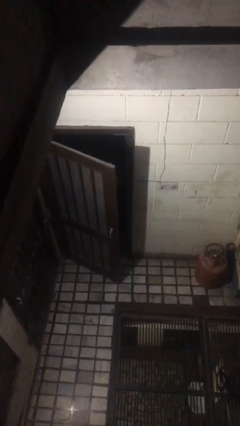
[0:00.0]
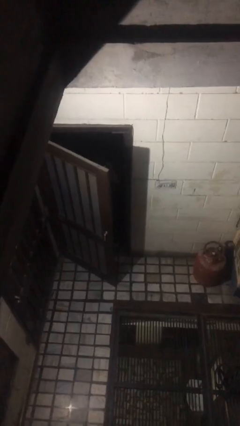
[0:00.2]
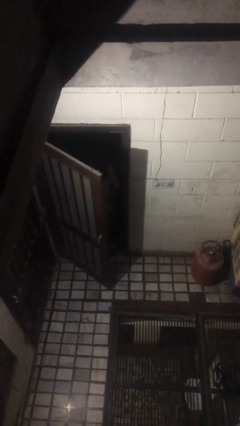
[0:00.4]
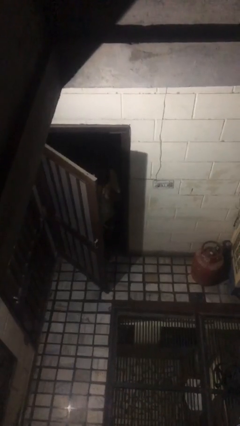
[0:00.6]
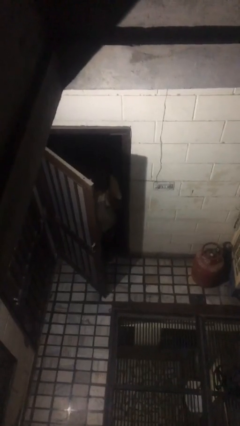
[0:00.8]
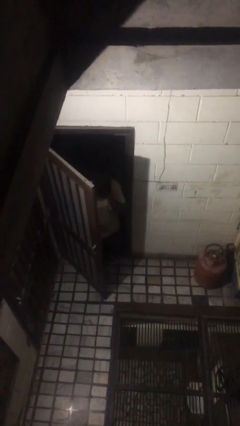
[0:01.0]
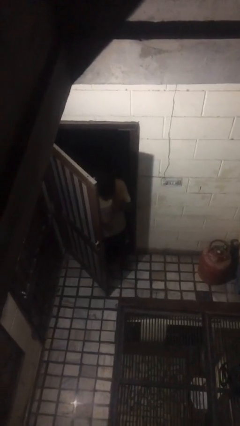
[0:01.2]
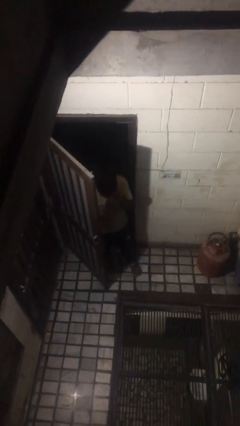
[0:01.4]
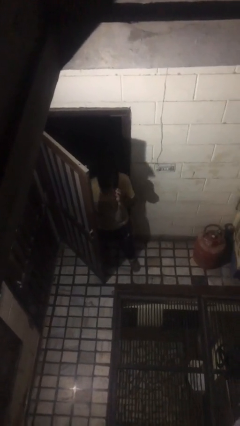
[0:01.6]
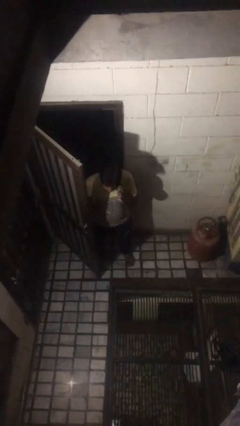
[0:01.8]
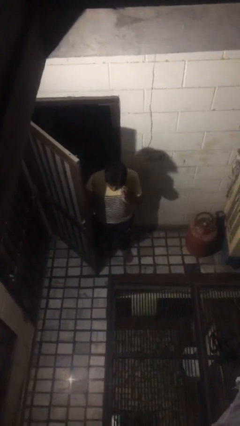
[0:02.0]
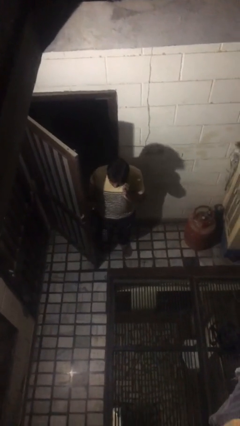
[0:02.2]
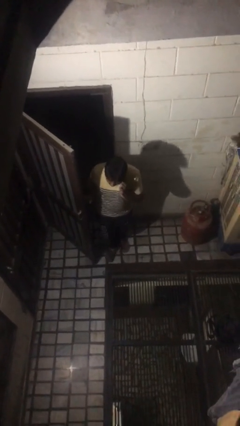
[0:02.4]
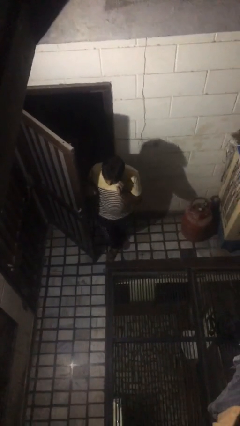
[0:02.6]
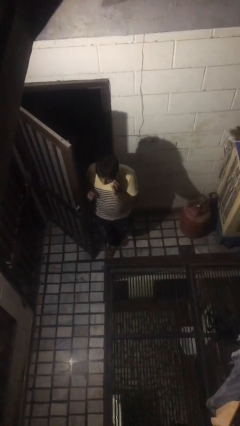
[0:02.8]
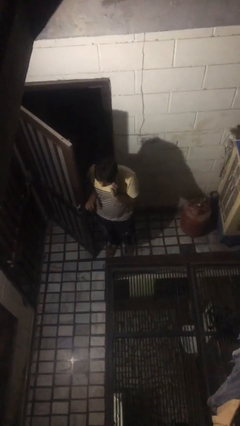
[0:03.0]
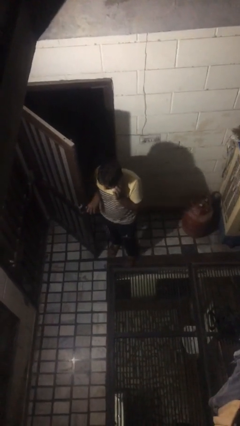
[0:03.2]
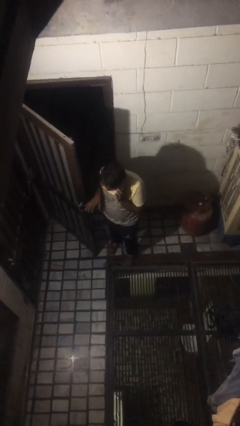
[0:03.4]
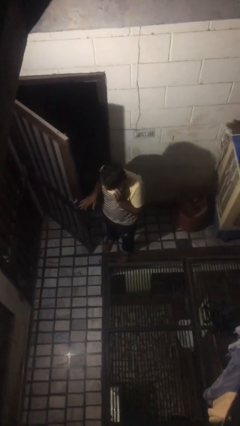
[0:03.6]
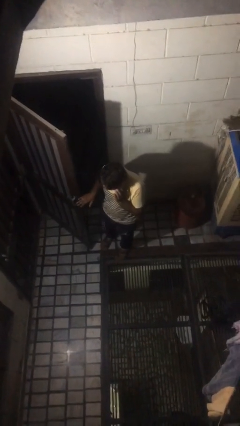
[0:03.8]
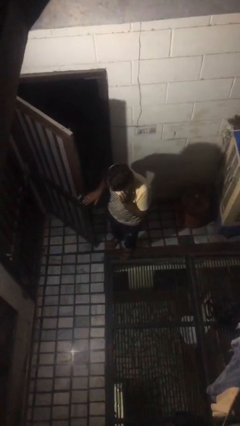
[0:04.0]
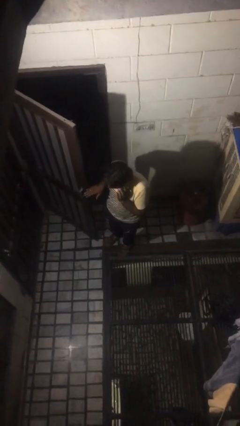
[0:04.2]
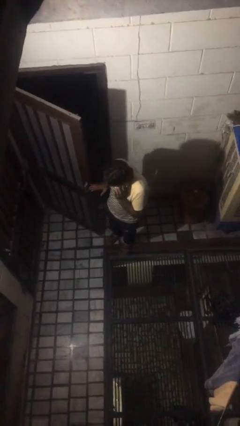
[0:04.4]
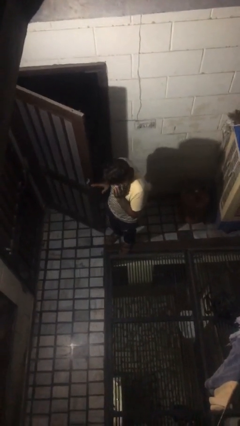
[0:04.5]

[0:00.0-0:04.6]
person enters scene through structure

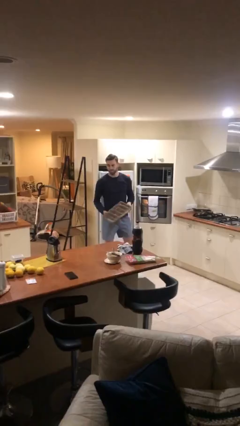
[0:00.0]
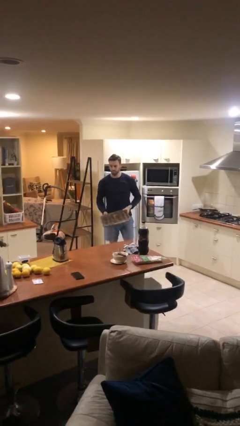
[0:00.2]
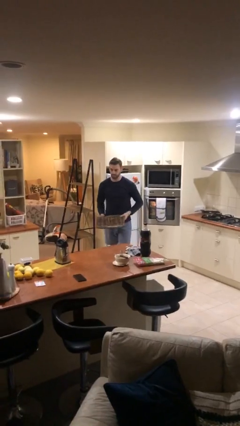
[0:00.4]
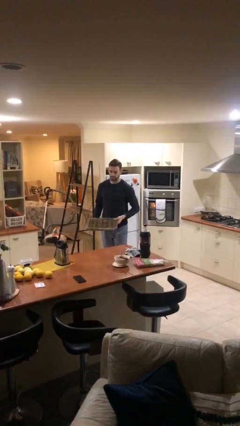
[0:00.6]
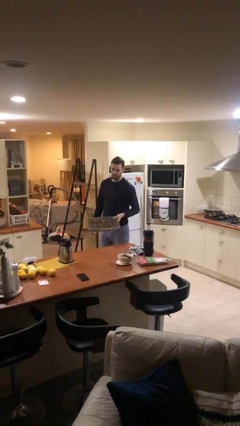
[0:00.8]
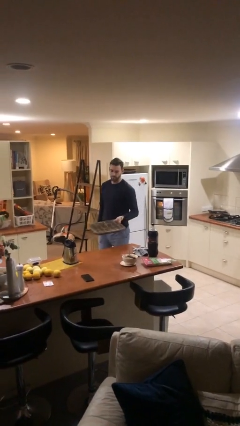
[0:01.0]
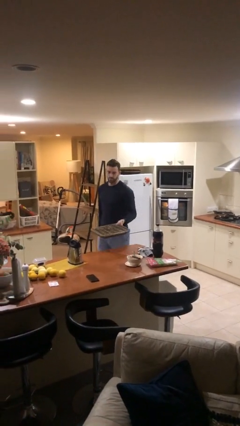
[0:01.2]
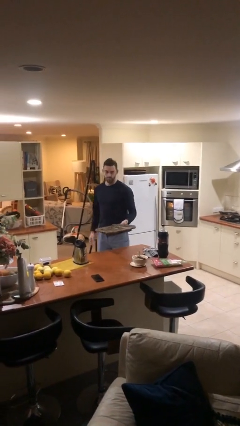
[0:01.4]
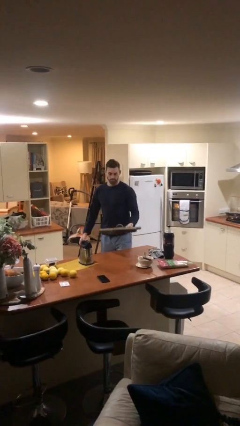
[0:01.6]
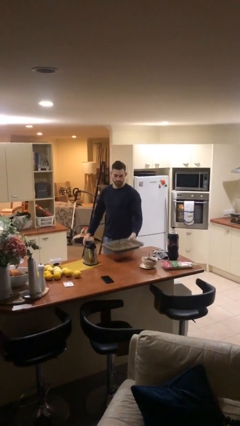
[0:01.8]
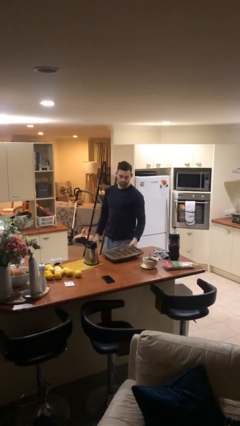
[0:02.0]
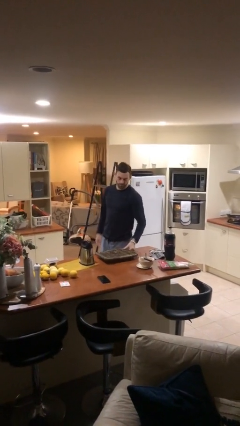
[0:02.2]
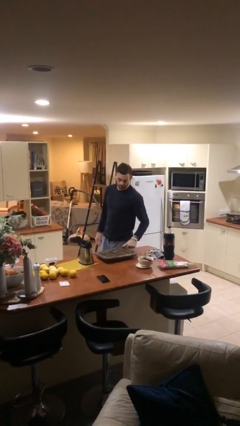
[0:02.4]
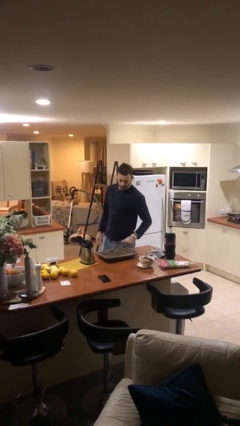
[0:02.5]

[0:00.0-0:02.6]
person puts down object on table

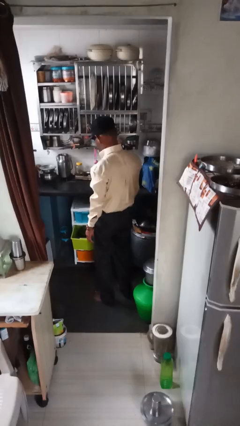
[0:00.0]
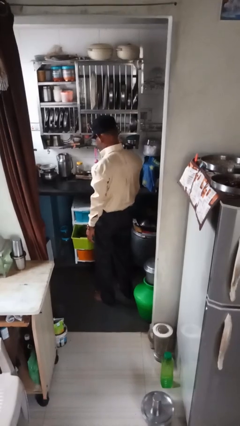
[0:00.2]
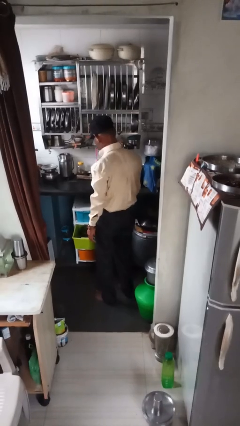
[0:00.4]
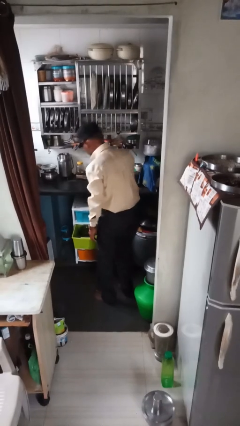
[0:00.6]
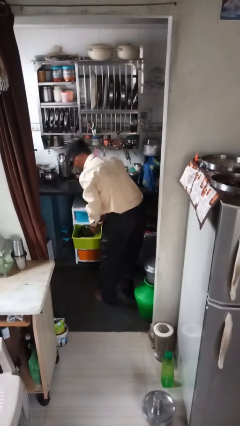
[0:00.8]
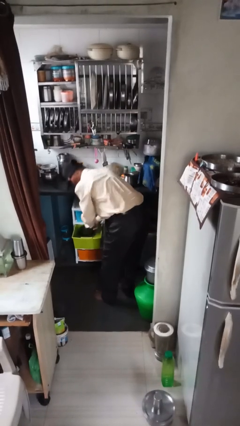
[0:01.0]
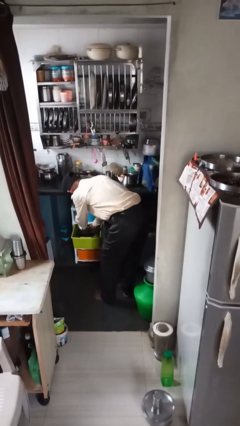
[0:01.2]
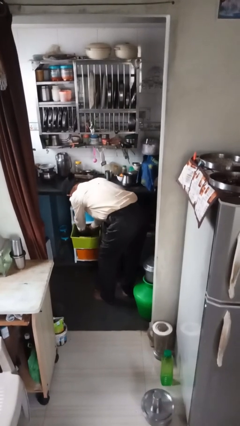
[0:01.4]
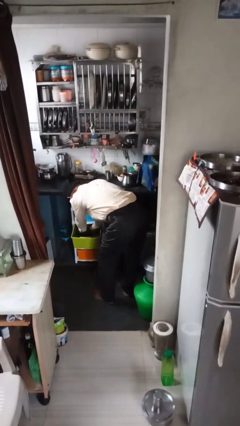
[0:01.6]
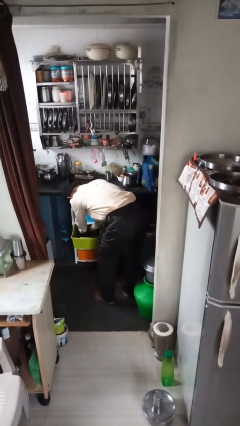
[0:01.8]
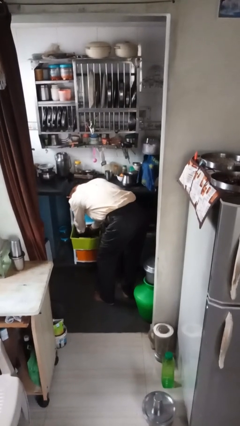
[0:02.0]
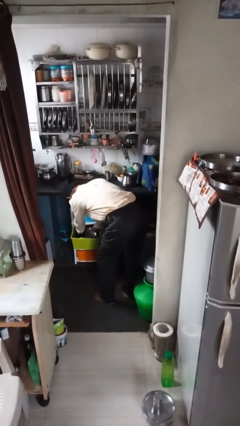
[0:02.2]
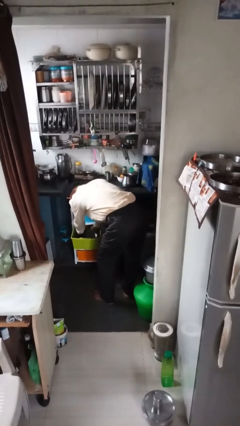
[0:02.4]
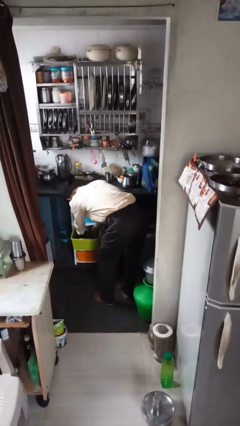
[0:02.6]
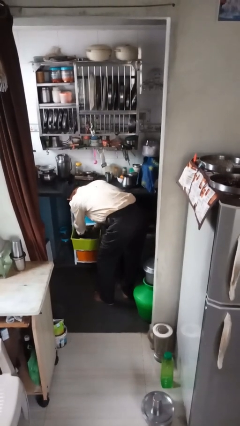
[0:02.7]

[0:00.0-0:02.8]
person searches in kitchen drawer

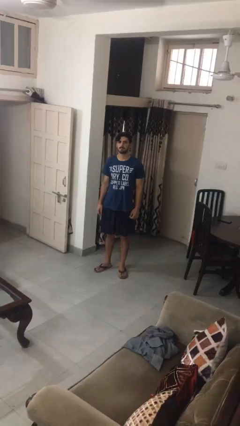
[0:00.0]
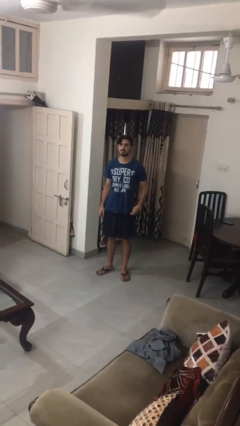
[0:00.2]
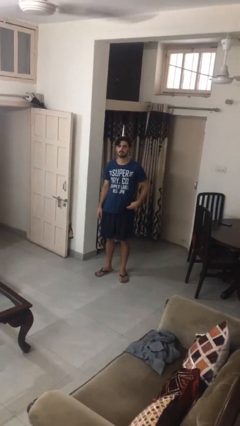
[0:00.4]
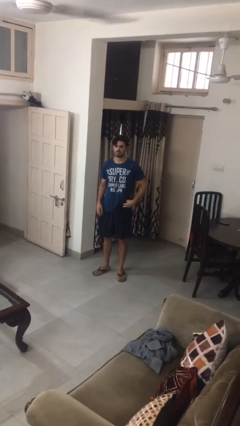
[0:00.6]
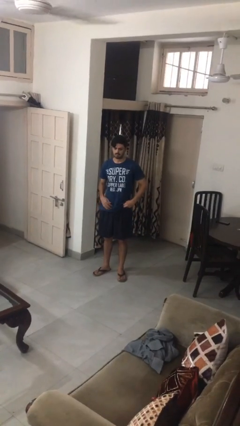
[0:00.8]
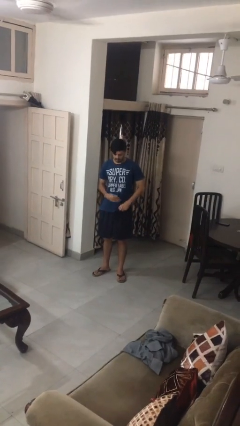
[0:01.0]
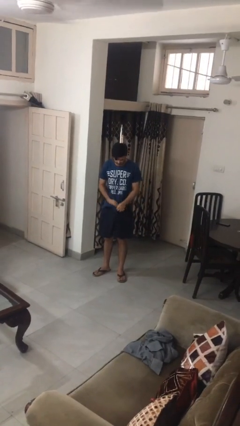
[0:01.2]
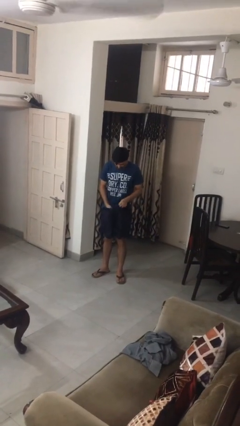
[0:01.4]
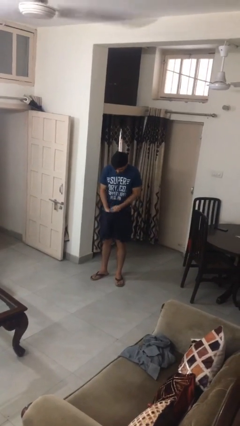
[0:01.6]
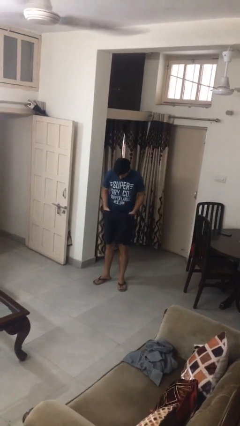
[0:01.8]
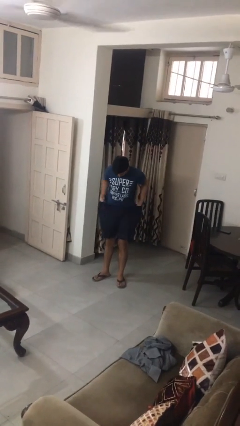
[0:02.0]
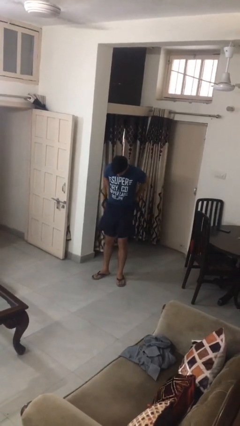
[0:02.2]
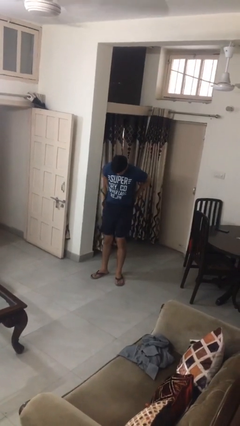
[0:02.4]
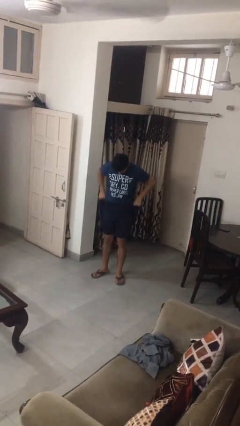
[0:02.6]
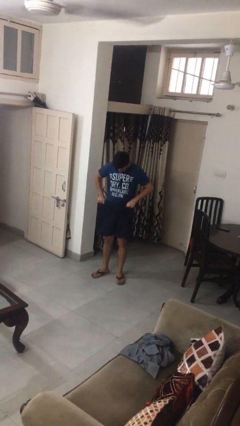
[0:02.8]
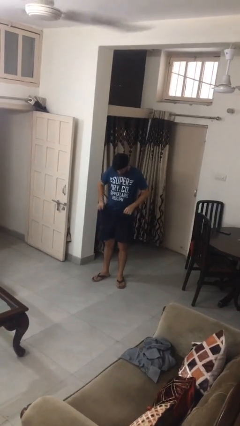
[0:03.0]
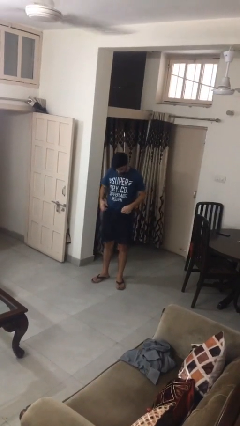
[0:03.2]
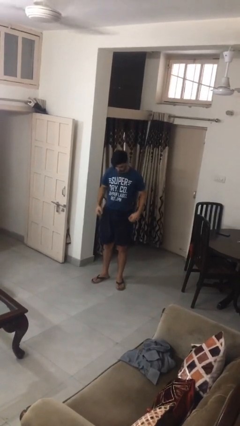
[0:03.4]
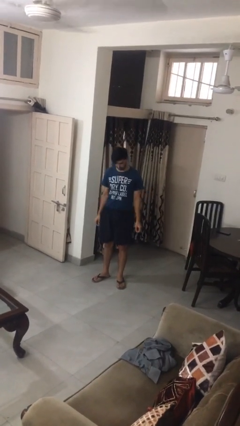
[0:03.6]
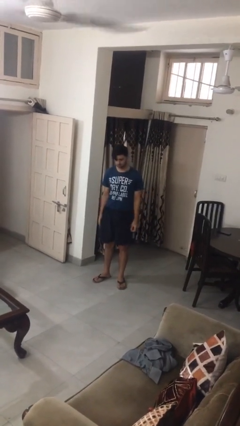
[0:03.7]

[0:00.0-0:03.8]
person tucks in shirt

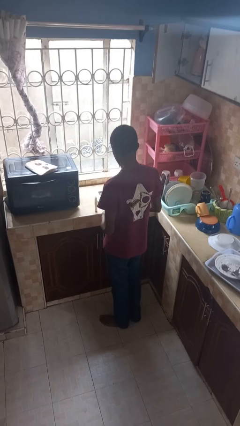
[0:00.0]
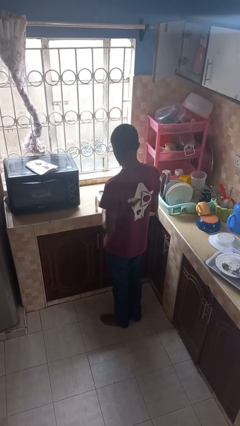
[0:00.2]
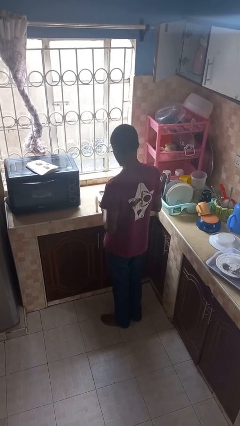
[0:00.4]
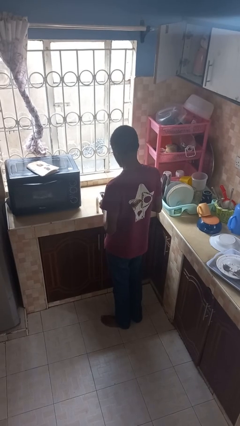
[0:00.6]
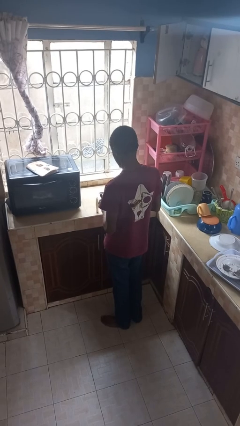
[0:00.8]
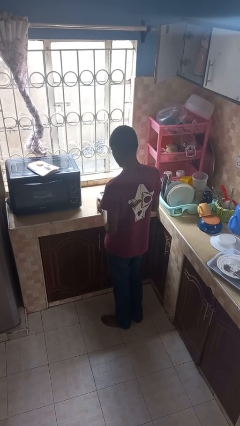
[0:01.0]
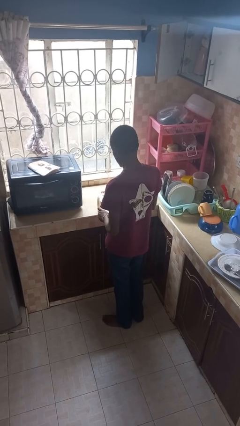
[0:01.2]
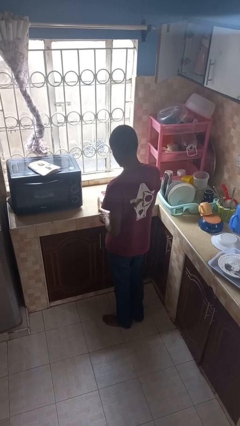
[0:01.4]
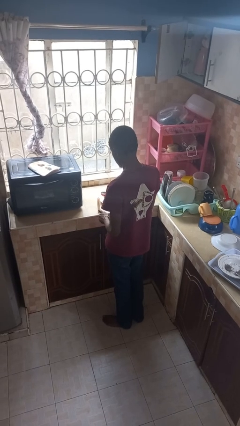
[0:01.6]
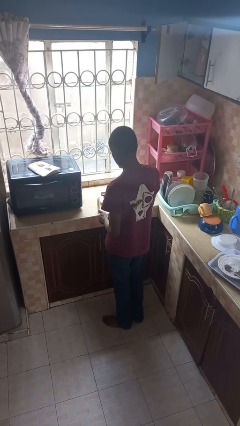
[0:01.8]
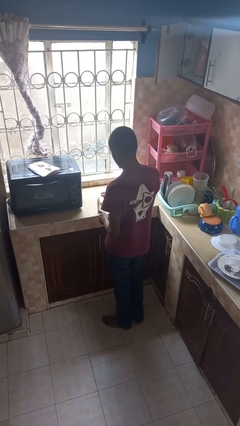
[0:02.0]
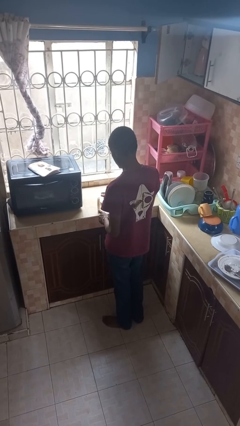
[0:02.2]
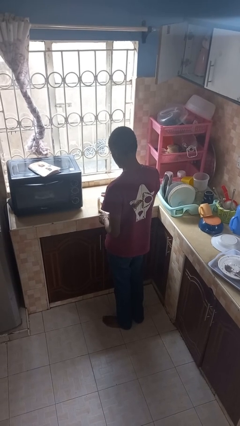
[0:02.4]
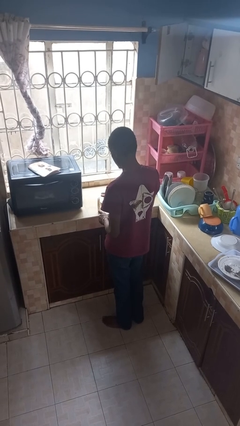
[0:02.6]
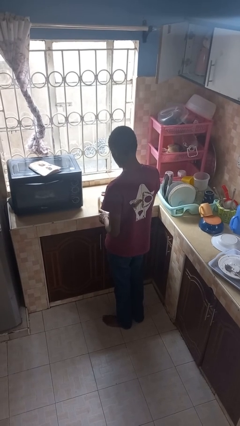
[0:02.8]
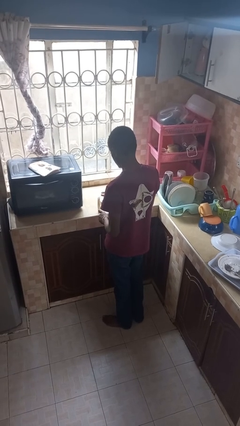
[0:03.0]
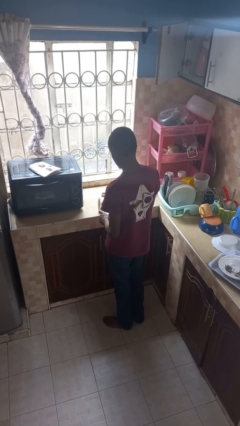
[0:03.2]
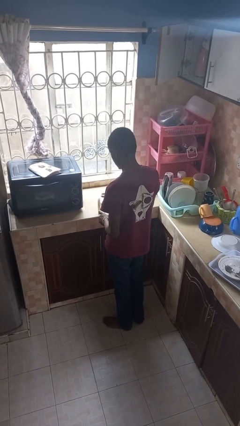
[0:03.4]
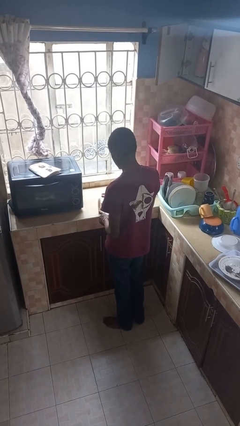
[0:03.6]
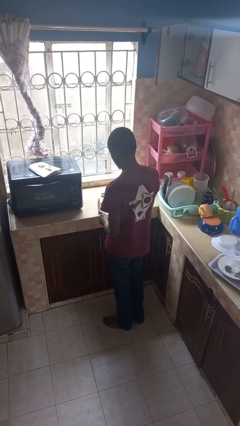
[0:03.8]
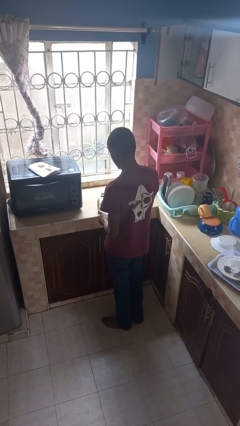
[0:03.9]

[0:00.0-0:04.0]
person lights candle

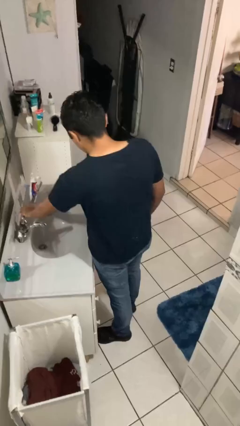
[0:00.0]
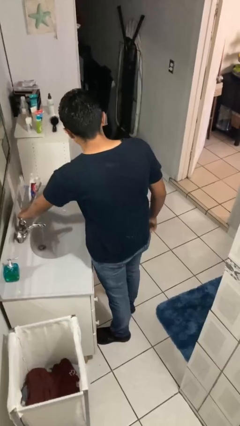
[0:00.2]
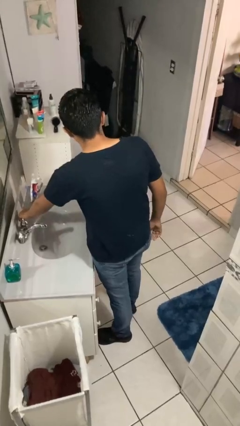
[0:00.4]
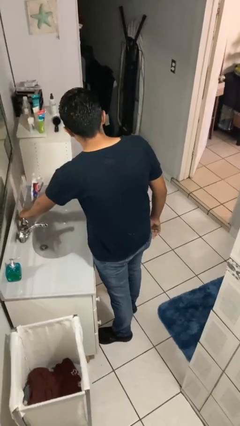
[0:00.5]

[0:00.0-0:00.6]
person turns off faucet
